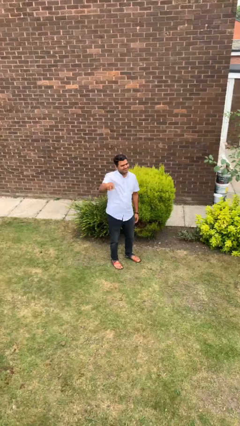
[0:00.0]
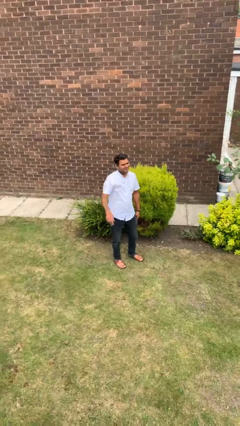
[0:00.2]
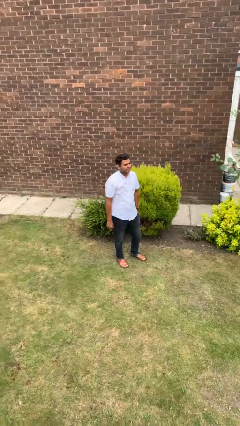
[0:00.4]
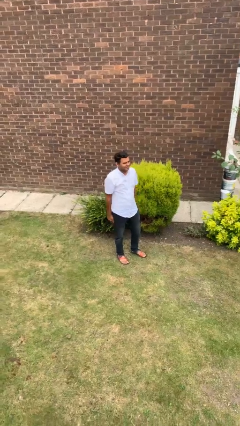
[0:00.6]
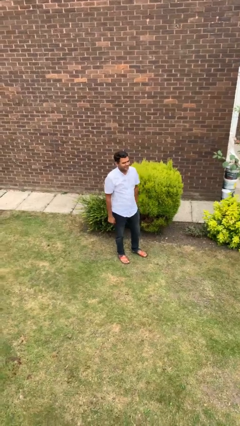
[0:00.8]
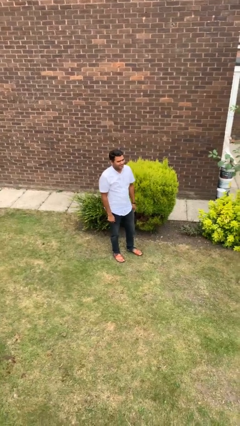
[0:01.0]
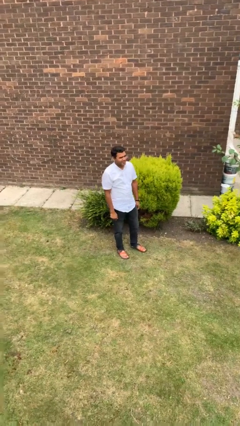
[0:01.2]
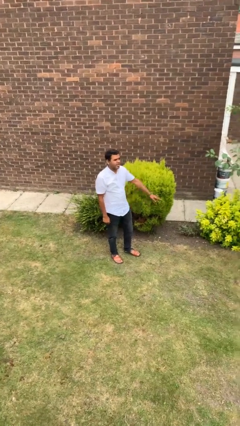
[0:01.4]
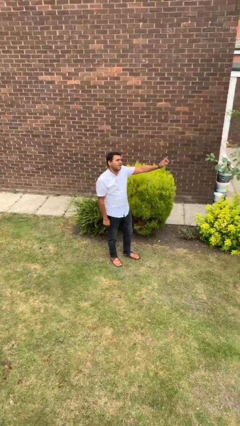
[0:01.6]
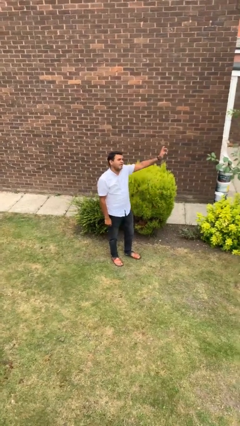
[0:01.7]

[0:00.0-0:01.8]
person gestures lower hand

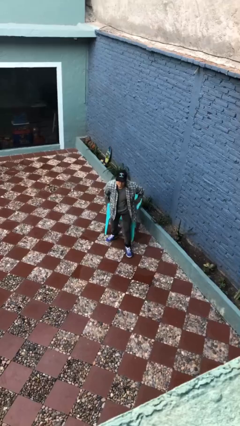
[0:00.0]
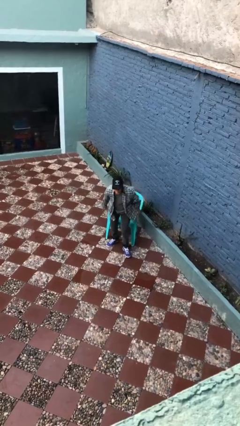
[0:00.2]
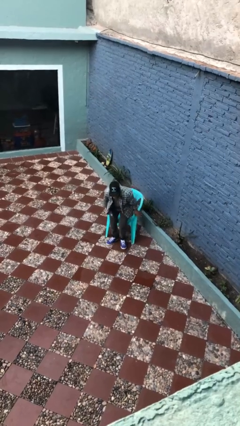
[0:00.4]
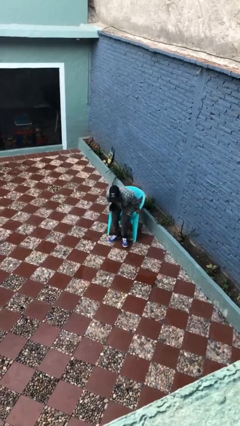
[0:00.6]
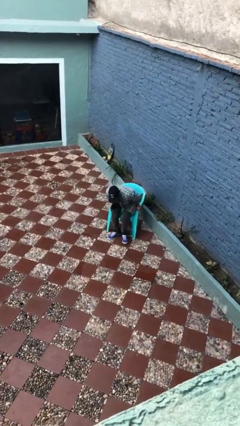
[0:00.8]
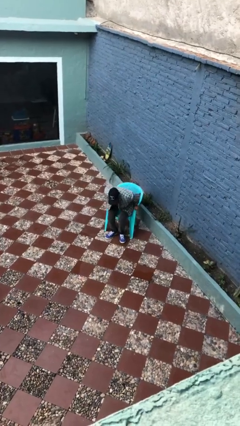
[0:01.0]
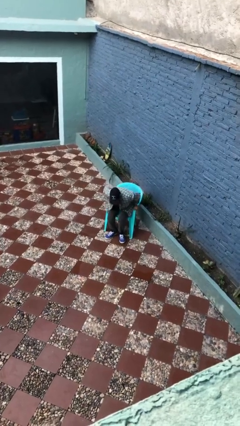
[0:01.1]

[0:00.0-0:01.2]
person sits down

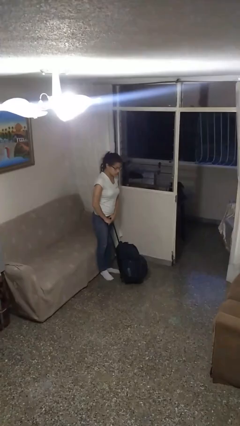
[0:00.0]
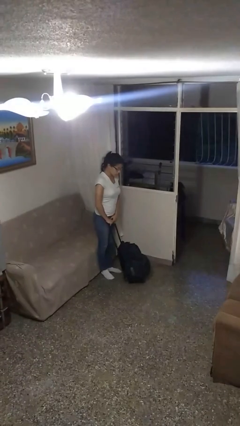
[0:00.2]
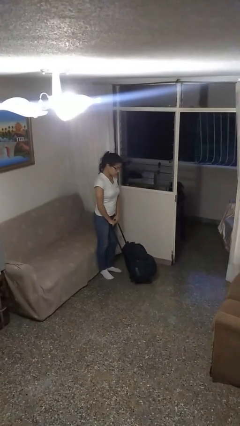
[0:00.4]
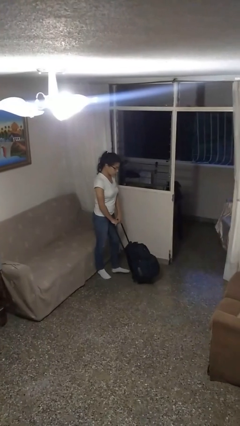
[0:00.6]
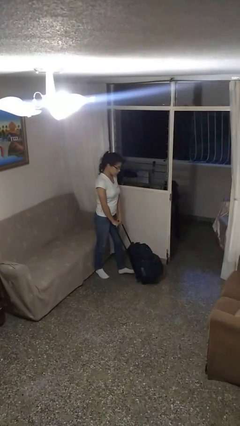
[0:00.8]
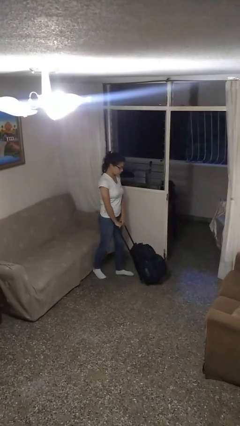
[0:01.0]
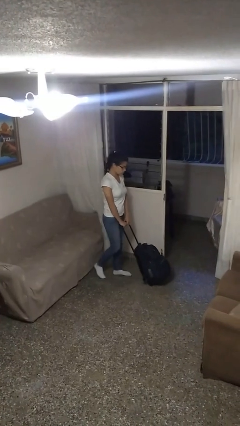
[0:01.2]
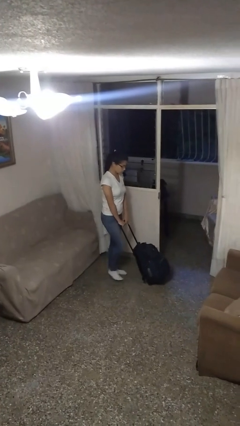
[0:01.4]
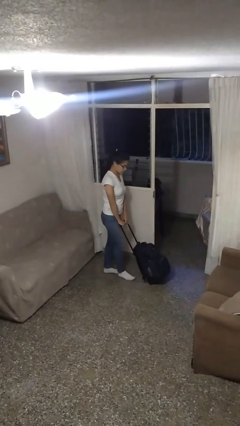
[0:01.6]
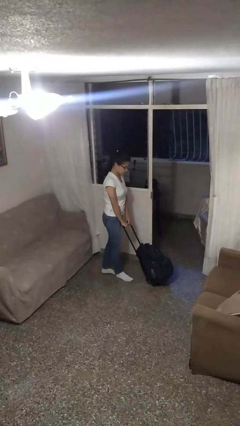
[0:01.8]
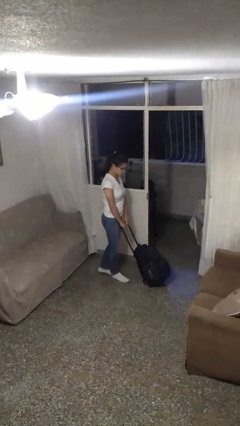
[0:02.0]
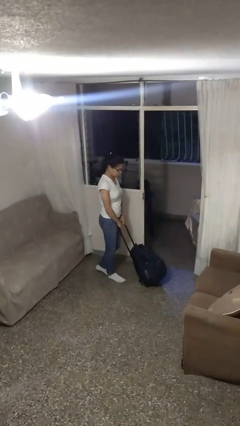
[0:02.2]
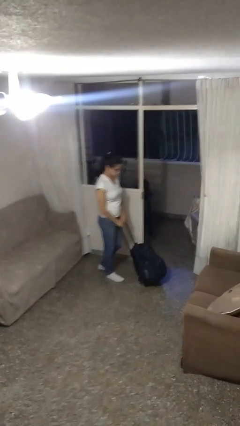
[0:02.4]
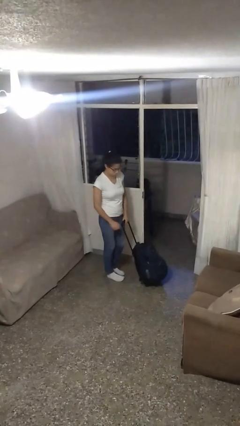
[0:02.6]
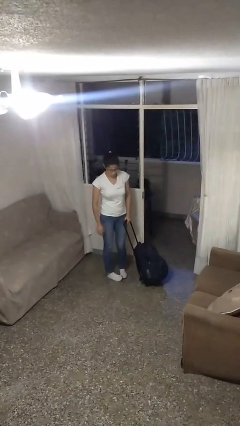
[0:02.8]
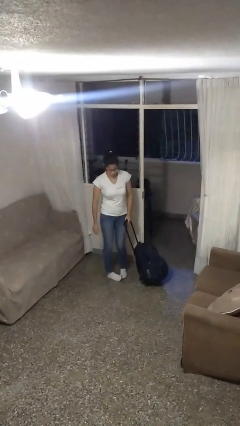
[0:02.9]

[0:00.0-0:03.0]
person pushes wheeled cart

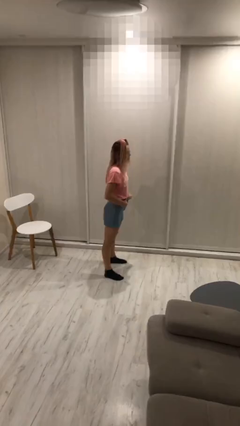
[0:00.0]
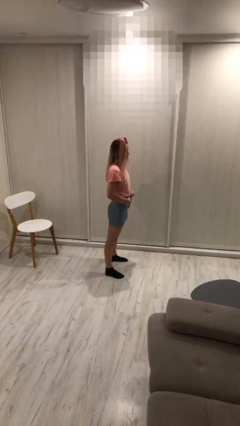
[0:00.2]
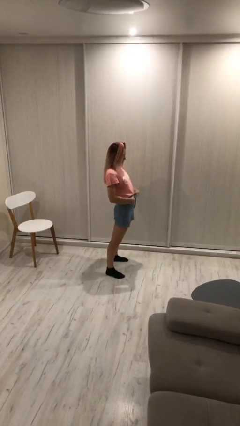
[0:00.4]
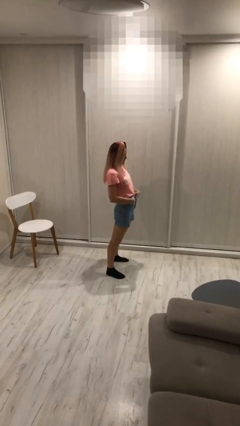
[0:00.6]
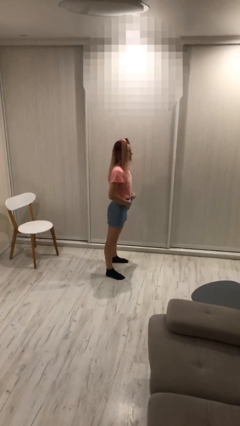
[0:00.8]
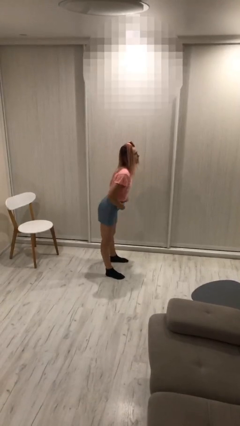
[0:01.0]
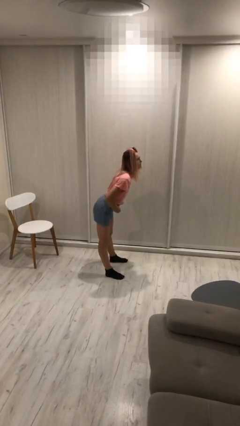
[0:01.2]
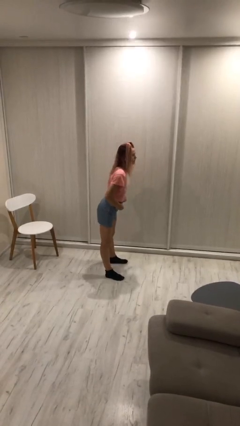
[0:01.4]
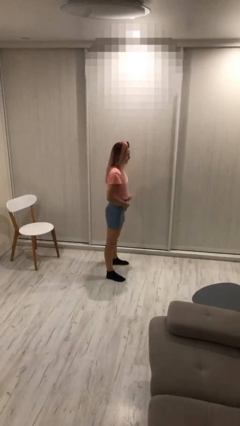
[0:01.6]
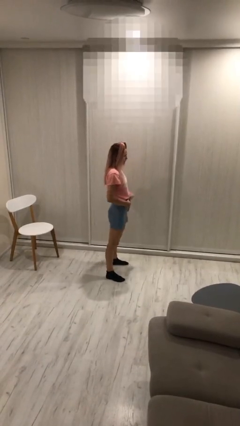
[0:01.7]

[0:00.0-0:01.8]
person wiggles hips

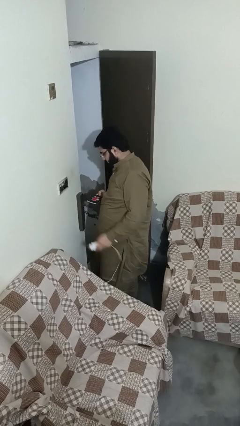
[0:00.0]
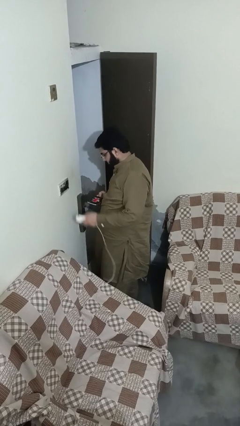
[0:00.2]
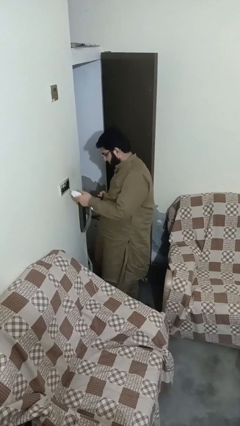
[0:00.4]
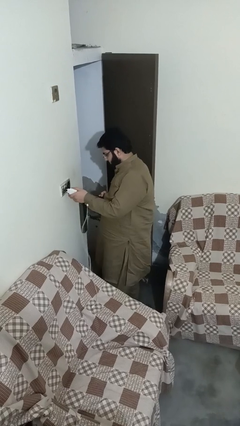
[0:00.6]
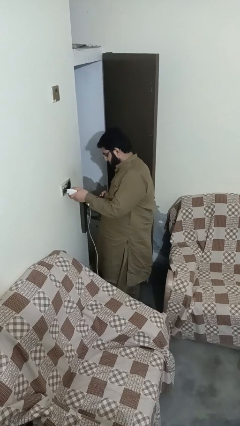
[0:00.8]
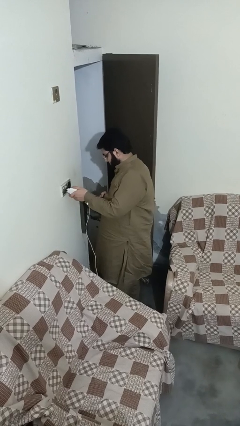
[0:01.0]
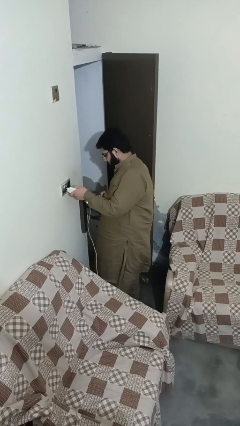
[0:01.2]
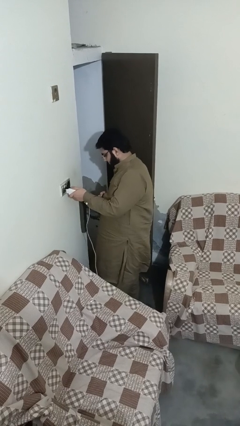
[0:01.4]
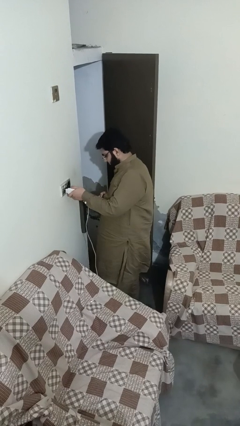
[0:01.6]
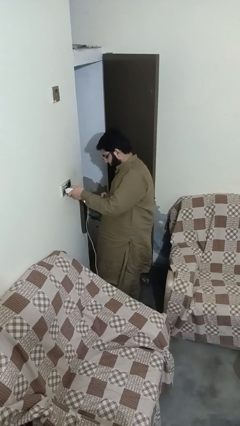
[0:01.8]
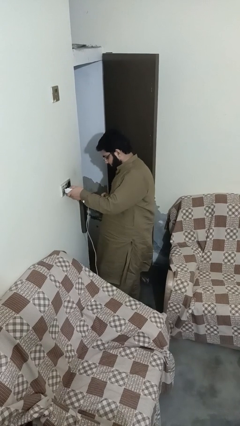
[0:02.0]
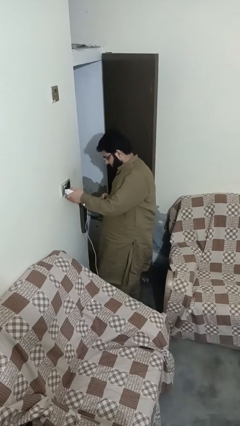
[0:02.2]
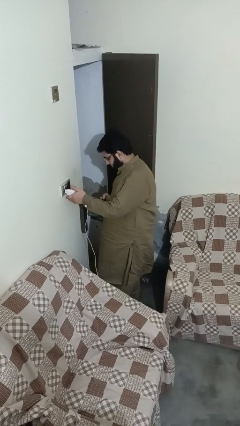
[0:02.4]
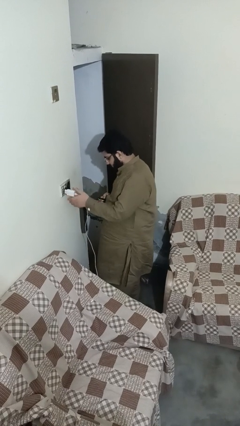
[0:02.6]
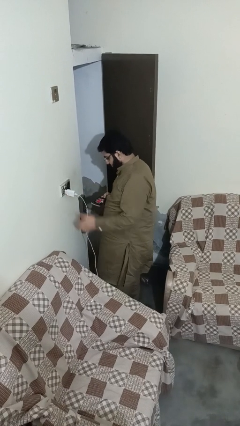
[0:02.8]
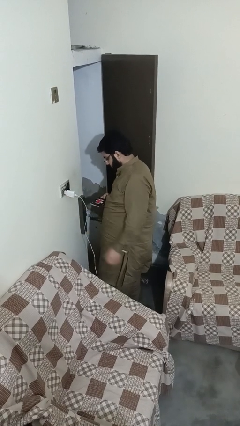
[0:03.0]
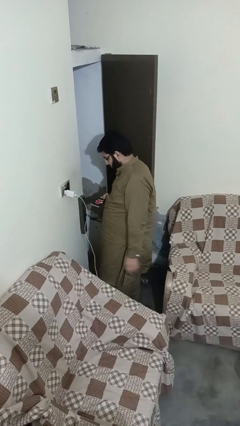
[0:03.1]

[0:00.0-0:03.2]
person plugs into electrical socket

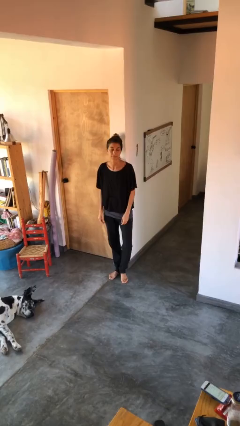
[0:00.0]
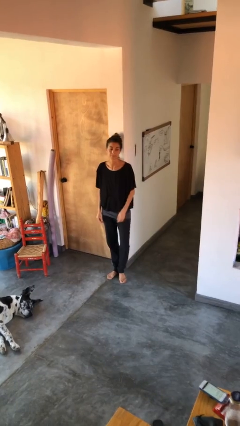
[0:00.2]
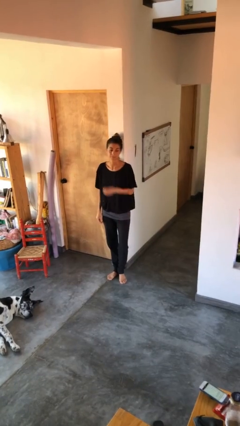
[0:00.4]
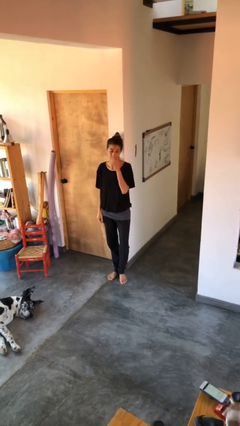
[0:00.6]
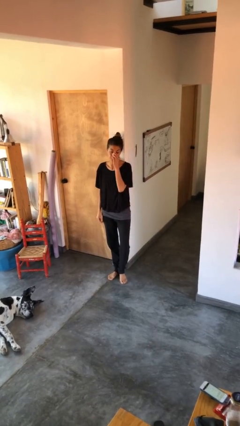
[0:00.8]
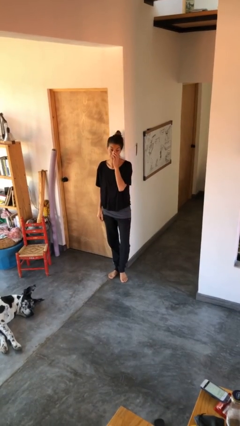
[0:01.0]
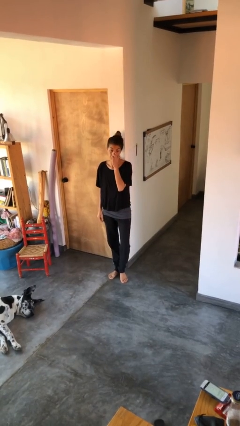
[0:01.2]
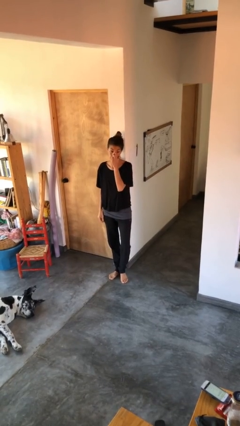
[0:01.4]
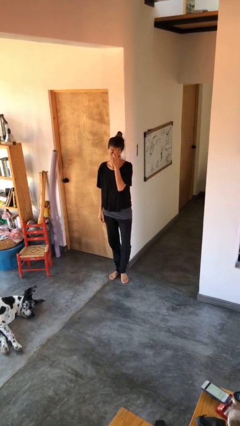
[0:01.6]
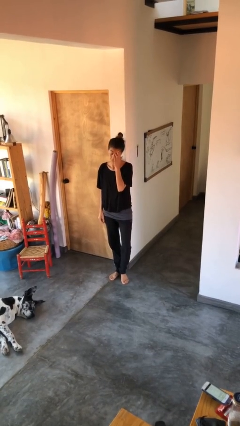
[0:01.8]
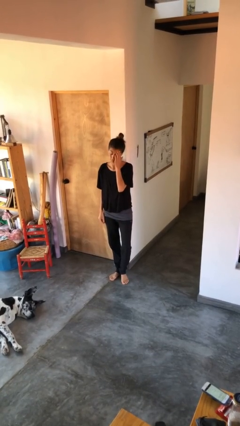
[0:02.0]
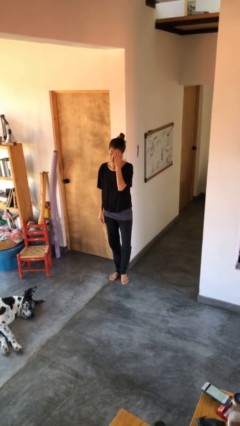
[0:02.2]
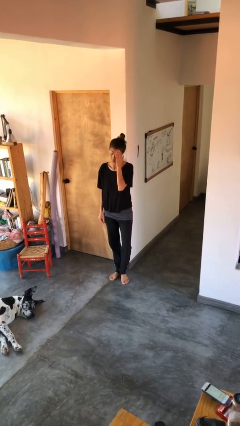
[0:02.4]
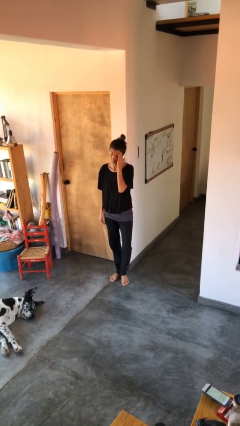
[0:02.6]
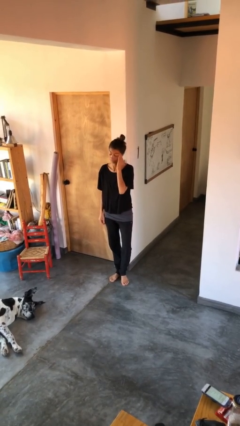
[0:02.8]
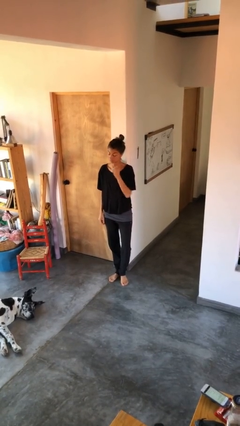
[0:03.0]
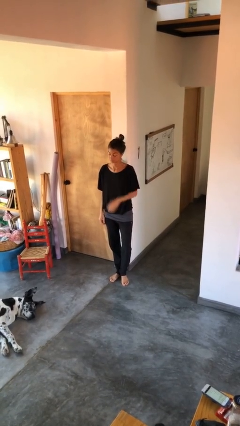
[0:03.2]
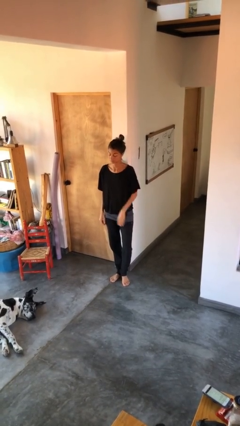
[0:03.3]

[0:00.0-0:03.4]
person scratches face

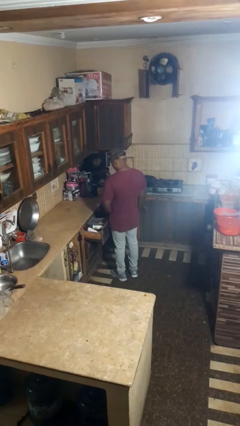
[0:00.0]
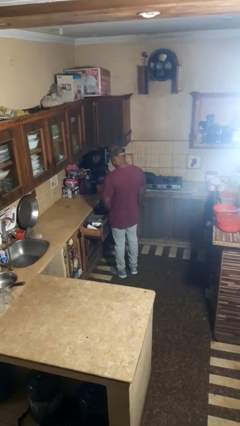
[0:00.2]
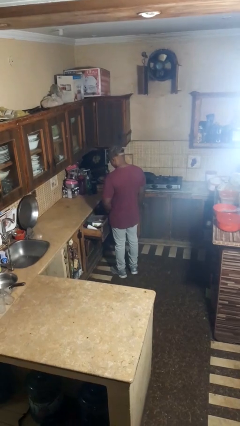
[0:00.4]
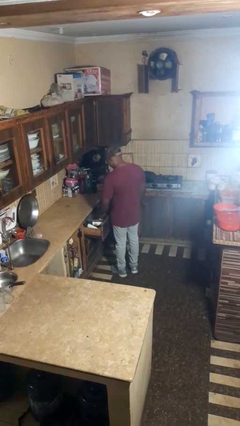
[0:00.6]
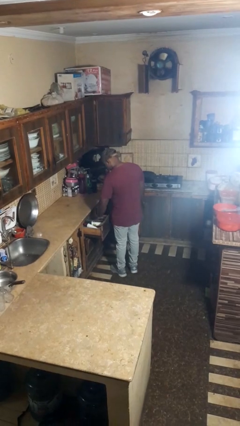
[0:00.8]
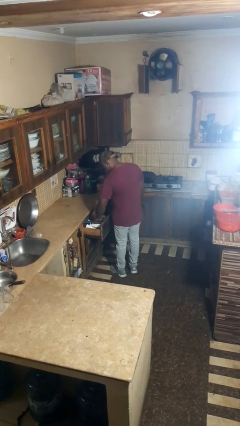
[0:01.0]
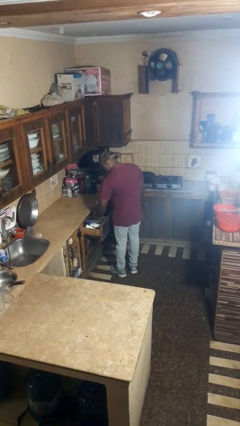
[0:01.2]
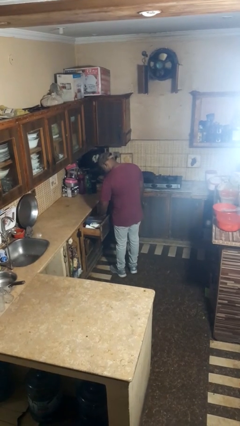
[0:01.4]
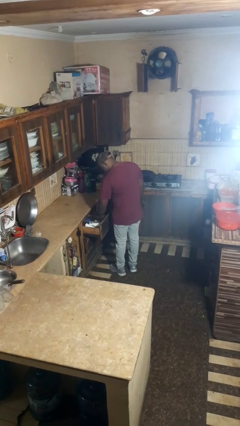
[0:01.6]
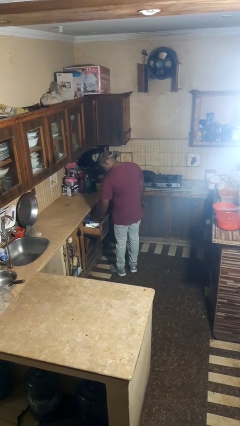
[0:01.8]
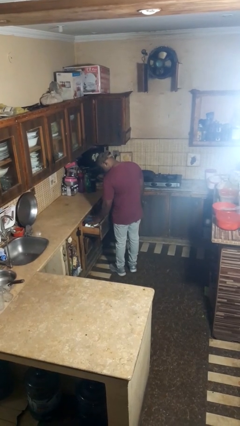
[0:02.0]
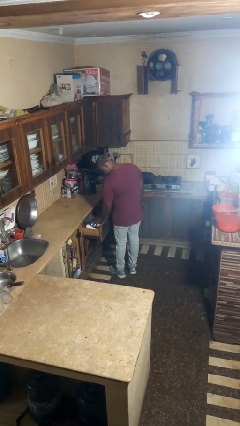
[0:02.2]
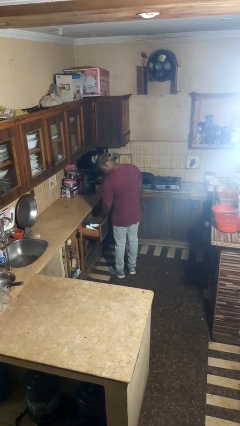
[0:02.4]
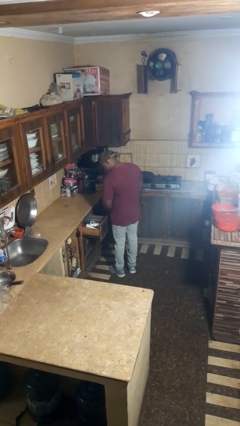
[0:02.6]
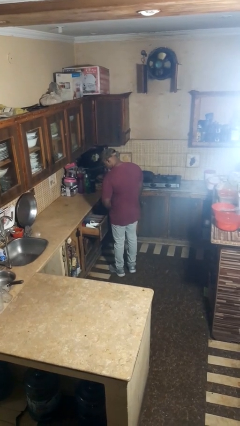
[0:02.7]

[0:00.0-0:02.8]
person searches in kitchen drawer
